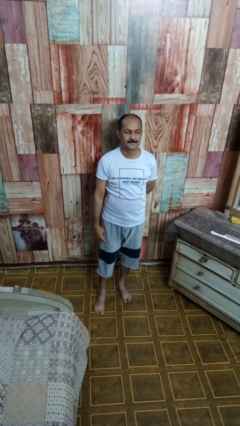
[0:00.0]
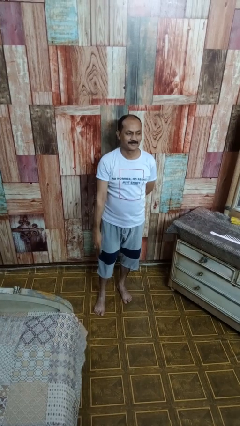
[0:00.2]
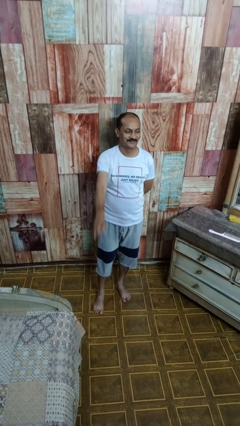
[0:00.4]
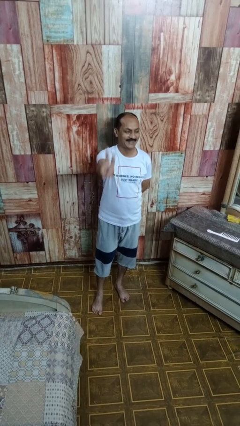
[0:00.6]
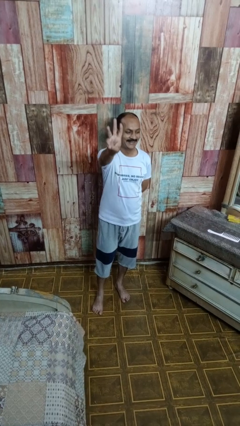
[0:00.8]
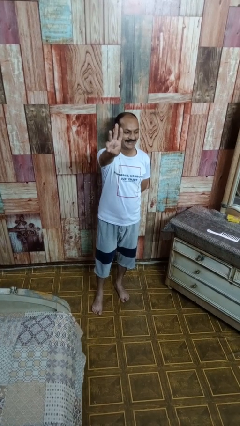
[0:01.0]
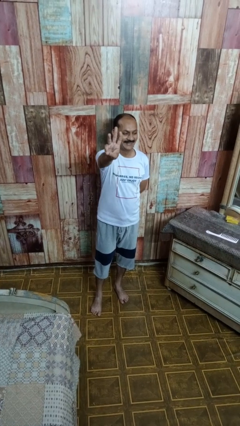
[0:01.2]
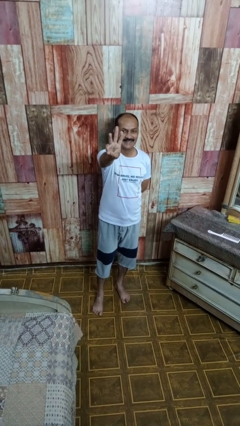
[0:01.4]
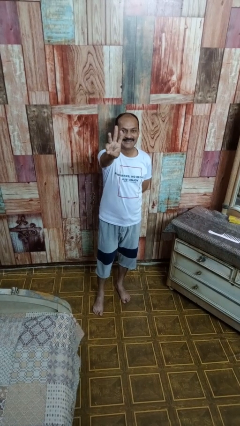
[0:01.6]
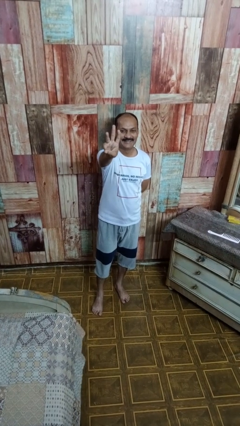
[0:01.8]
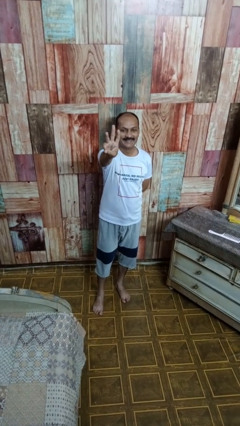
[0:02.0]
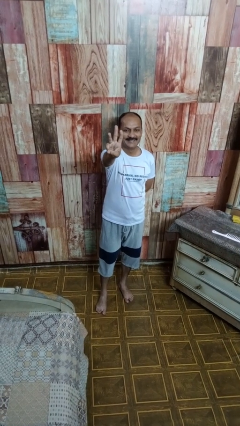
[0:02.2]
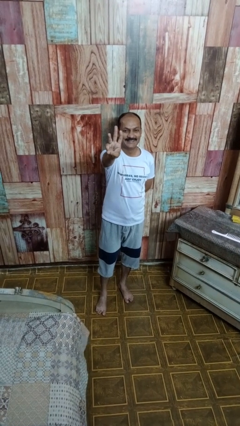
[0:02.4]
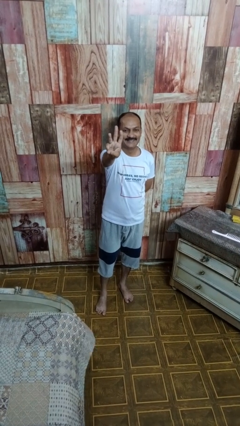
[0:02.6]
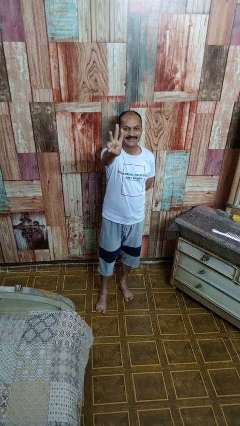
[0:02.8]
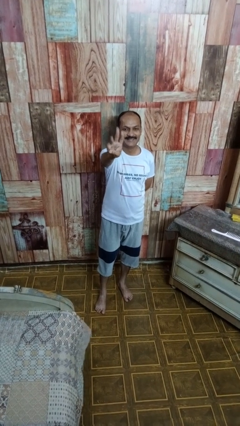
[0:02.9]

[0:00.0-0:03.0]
person gestures number three

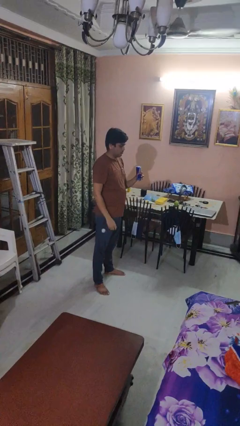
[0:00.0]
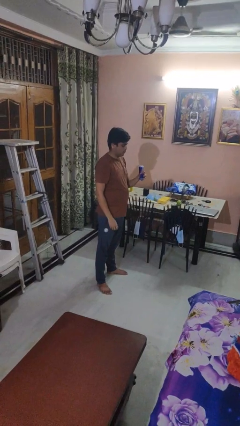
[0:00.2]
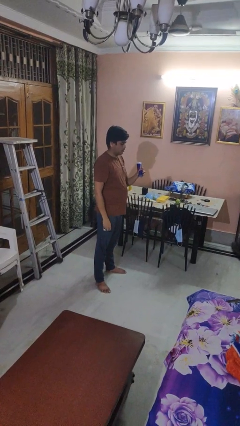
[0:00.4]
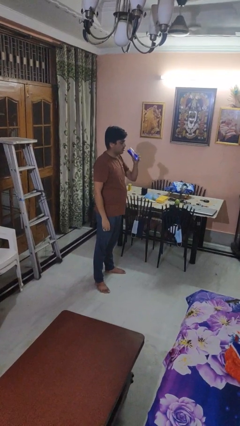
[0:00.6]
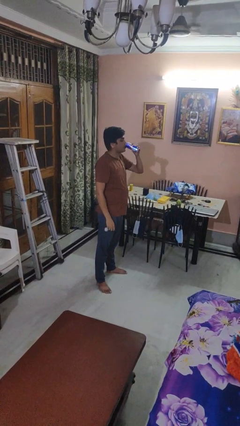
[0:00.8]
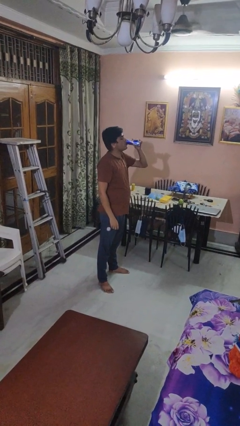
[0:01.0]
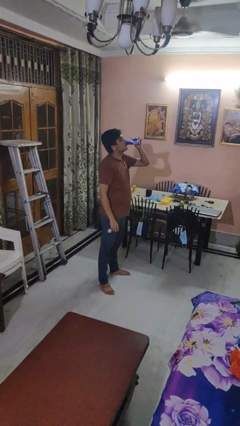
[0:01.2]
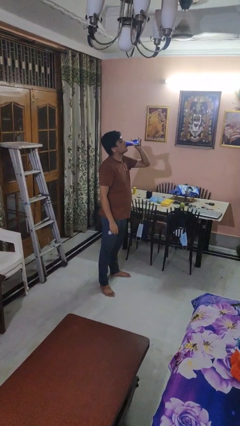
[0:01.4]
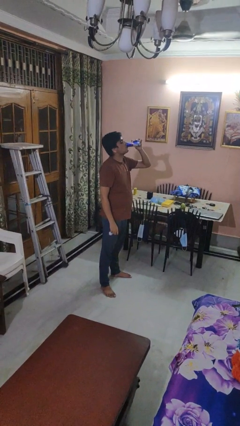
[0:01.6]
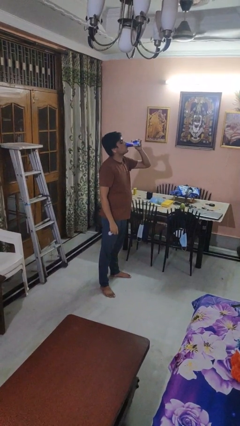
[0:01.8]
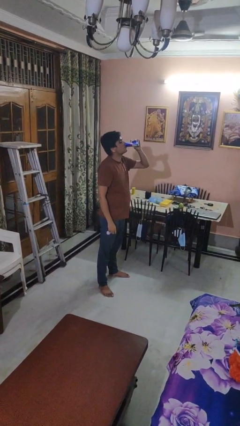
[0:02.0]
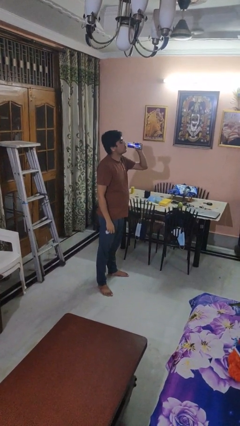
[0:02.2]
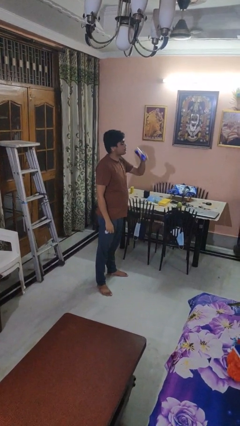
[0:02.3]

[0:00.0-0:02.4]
person drinks from beverage can

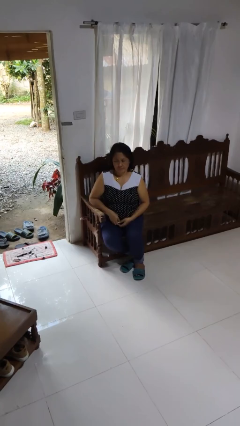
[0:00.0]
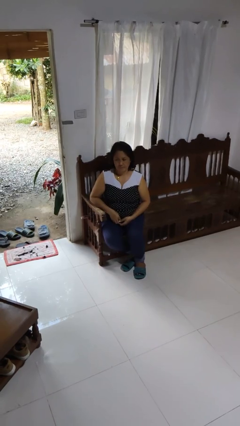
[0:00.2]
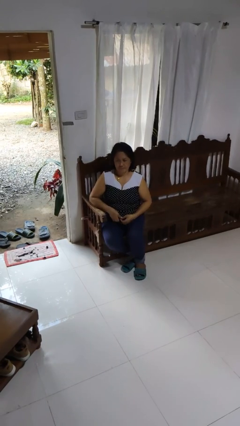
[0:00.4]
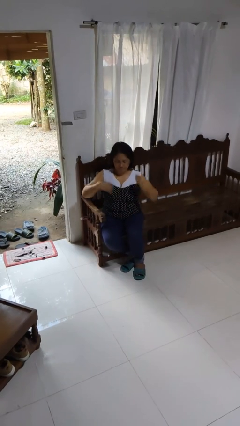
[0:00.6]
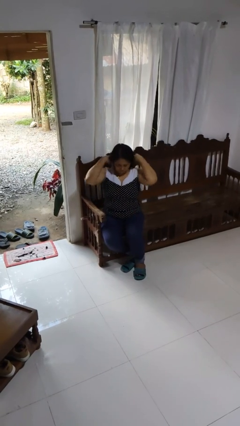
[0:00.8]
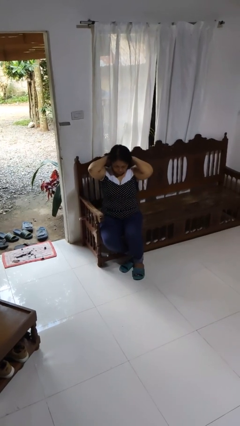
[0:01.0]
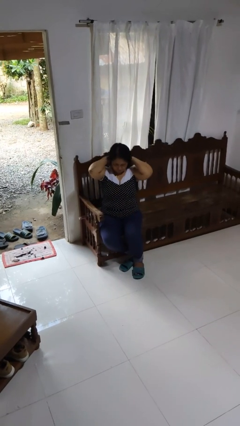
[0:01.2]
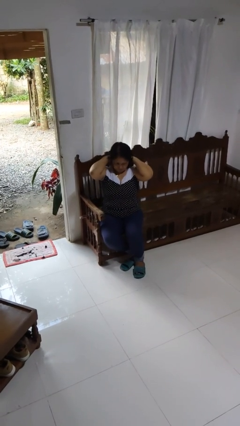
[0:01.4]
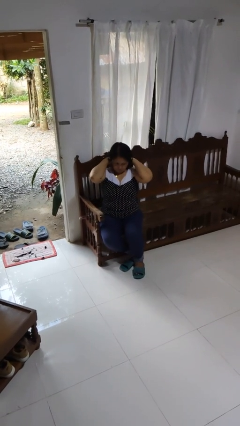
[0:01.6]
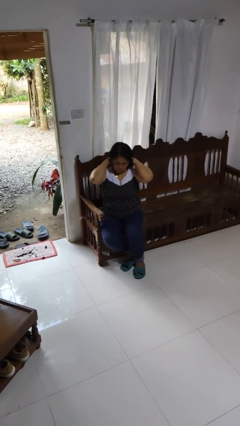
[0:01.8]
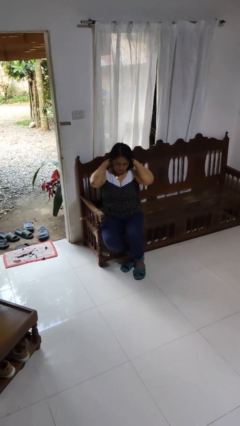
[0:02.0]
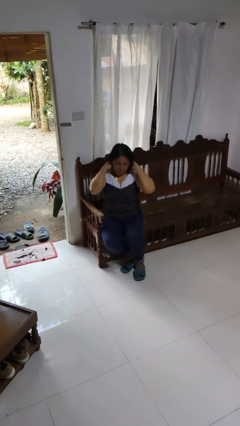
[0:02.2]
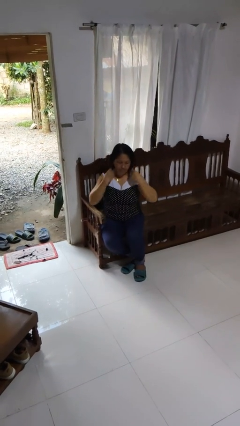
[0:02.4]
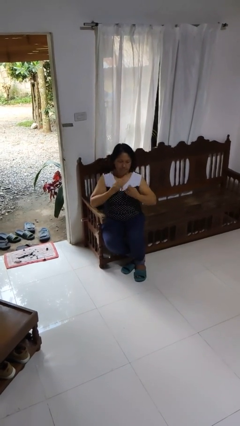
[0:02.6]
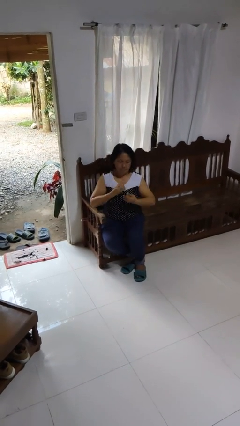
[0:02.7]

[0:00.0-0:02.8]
person takes off necklace

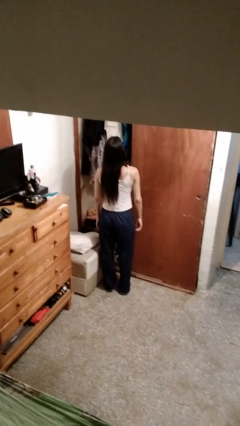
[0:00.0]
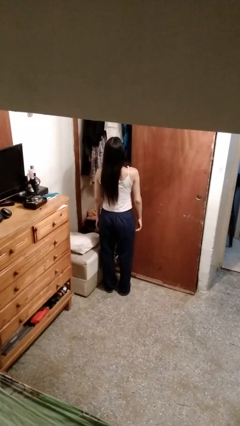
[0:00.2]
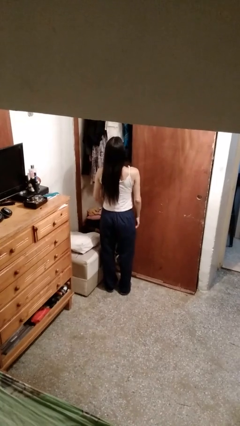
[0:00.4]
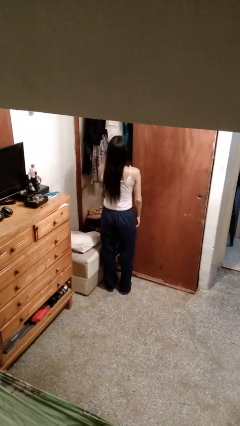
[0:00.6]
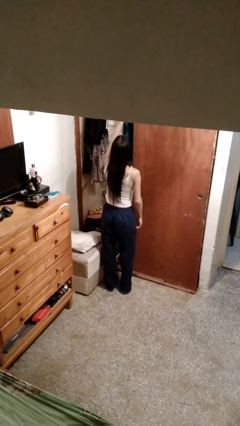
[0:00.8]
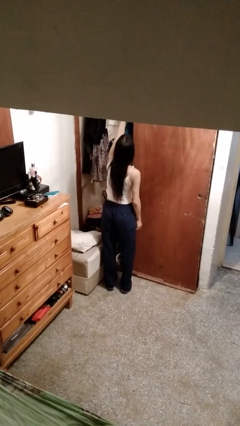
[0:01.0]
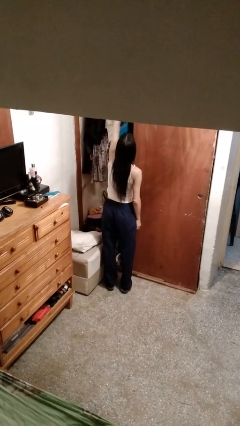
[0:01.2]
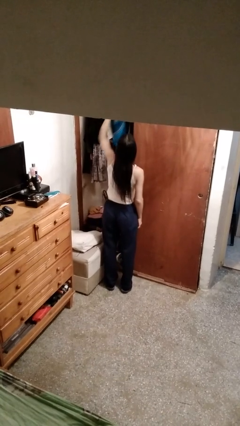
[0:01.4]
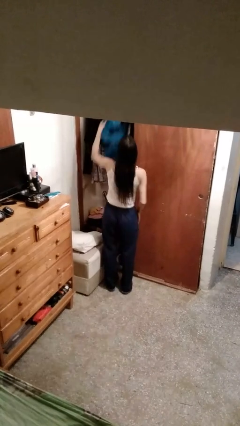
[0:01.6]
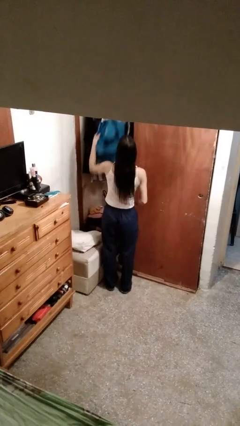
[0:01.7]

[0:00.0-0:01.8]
person takes clothes from closet

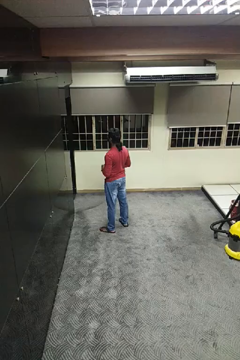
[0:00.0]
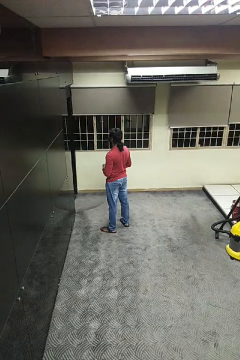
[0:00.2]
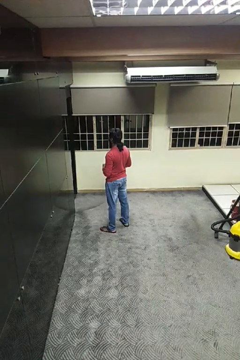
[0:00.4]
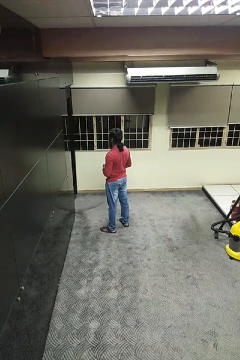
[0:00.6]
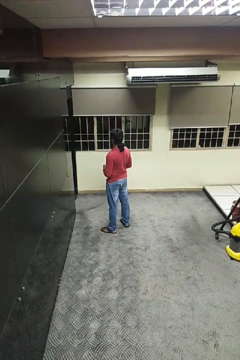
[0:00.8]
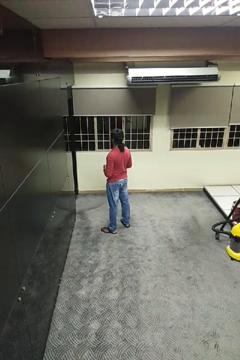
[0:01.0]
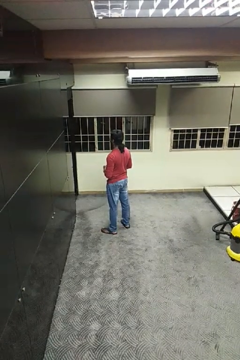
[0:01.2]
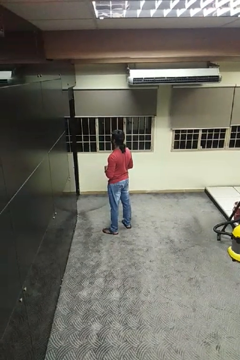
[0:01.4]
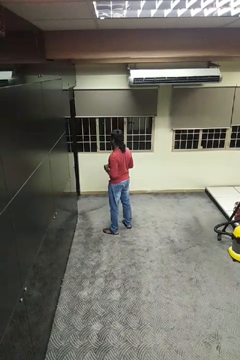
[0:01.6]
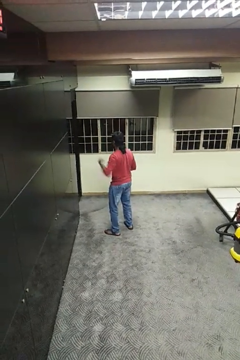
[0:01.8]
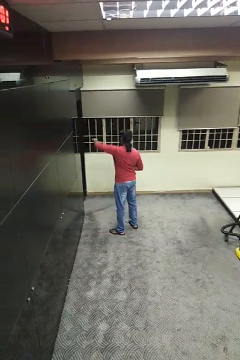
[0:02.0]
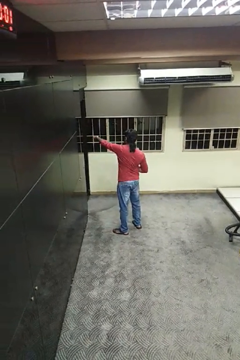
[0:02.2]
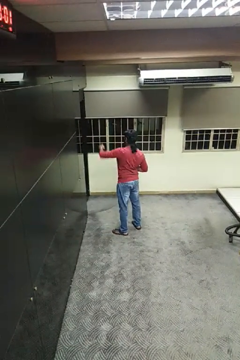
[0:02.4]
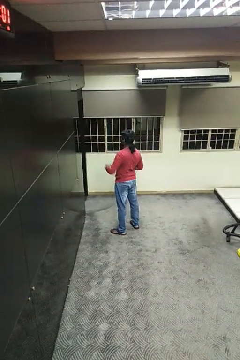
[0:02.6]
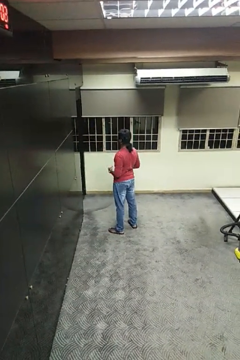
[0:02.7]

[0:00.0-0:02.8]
person punches

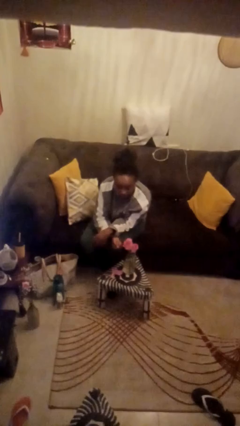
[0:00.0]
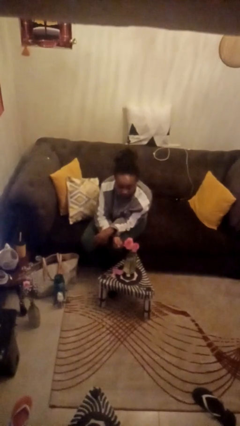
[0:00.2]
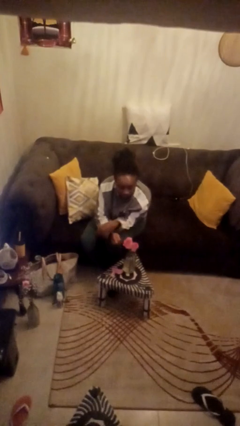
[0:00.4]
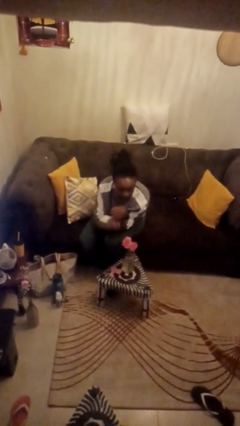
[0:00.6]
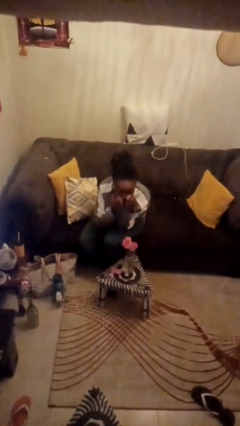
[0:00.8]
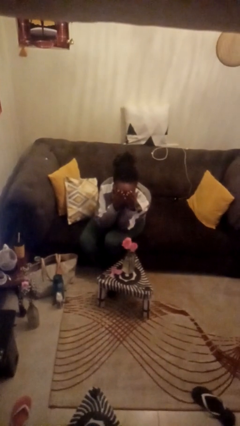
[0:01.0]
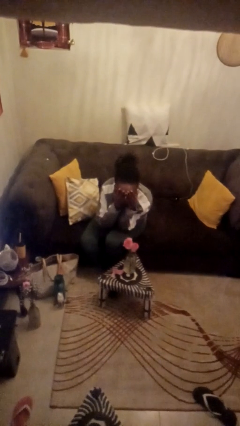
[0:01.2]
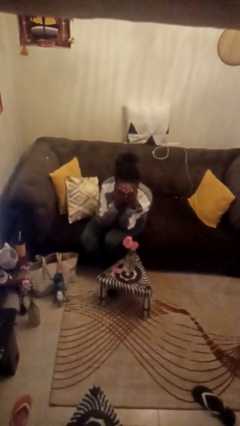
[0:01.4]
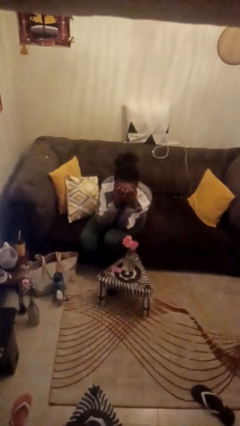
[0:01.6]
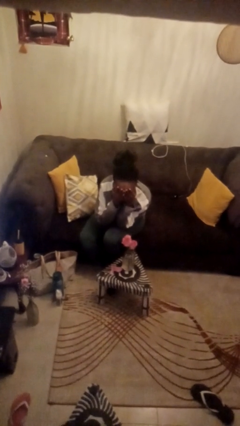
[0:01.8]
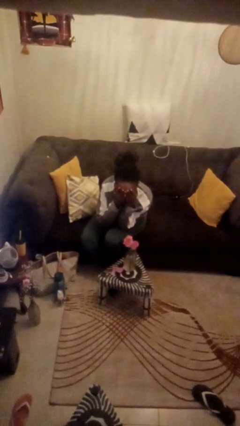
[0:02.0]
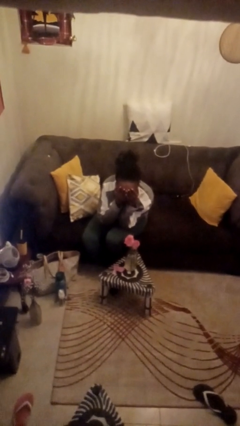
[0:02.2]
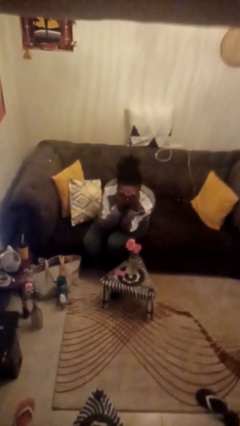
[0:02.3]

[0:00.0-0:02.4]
person covers face with hands

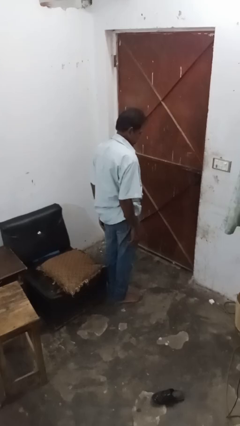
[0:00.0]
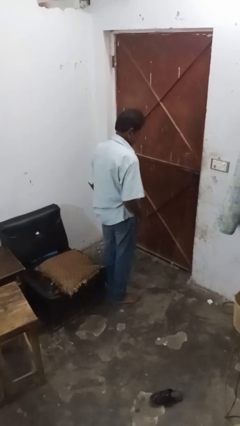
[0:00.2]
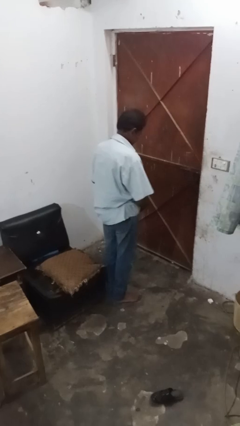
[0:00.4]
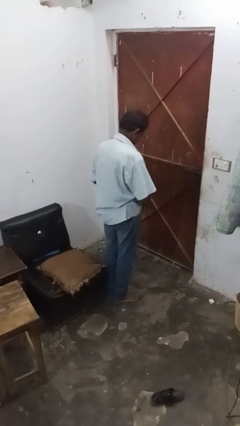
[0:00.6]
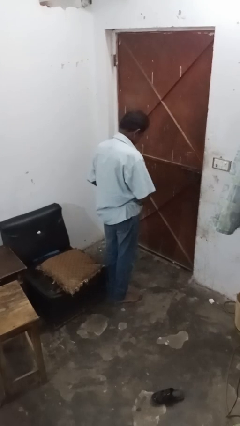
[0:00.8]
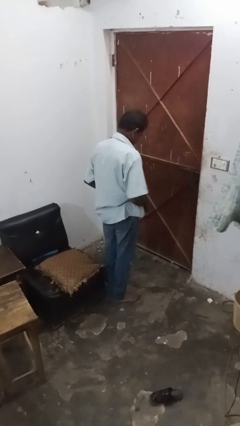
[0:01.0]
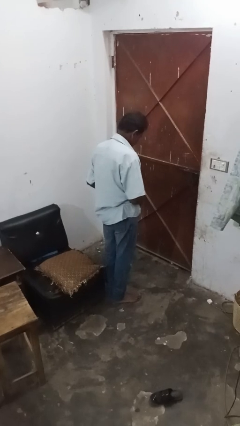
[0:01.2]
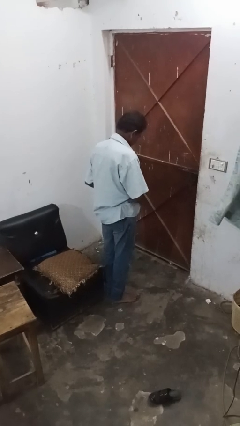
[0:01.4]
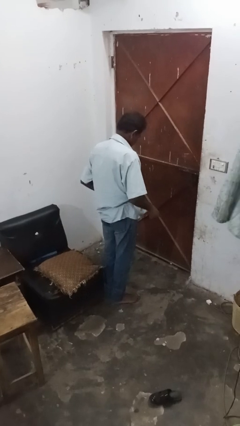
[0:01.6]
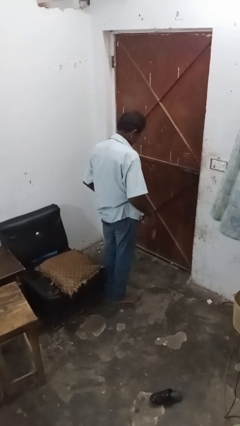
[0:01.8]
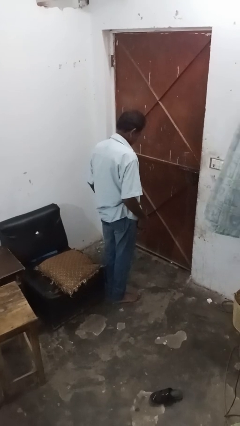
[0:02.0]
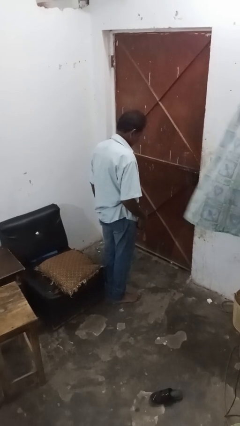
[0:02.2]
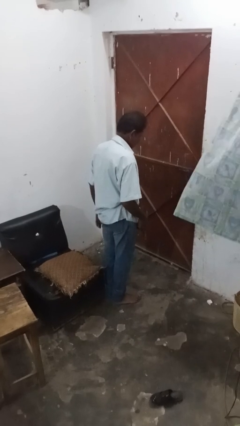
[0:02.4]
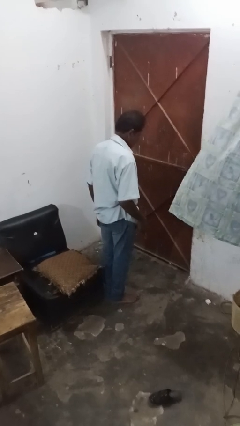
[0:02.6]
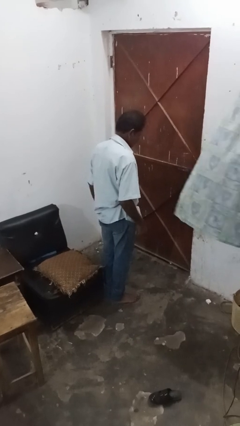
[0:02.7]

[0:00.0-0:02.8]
person takes off belt
